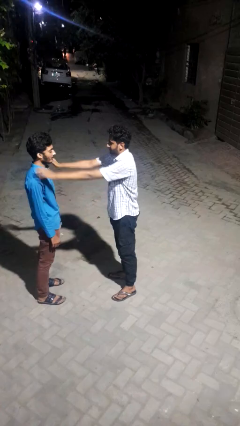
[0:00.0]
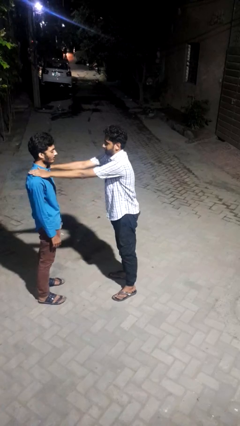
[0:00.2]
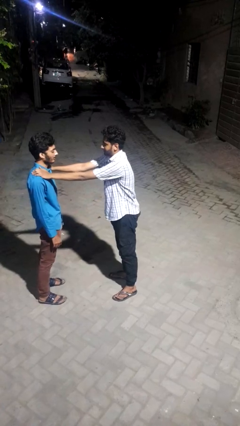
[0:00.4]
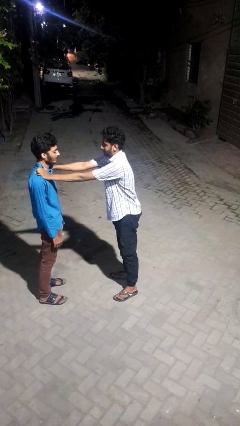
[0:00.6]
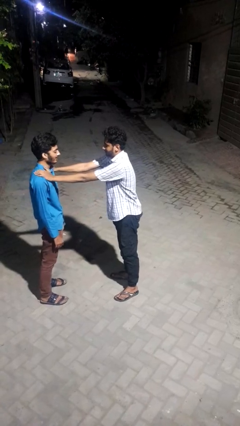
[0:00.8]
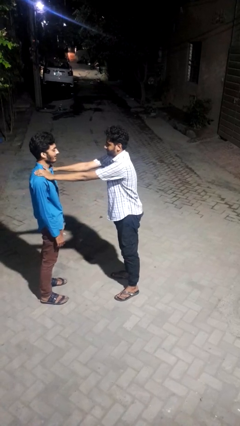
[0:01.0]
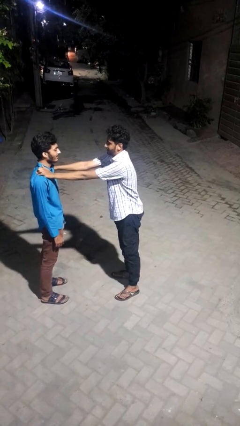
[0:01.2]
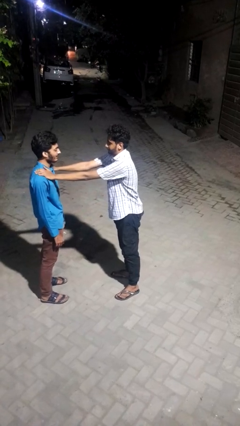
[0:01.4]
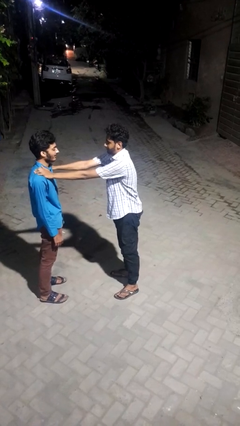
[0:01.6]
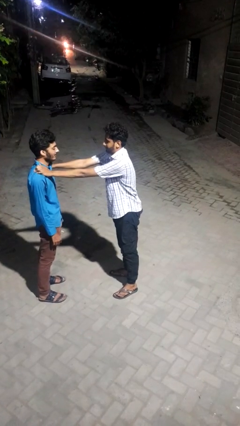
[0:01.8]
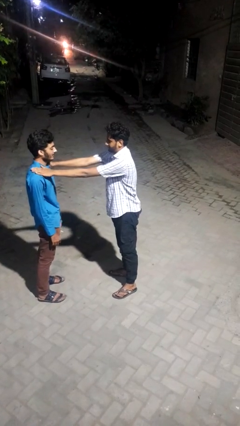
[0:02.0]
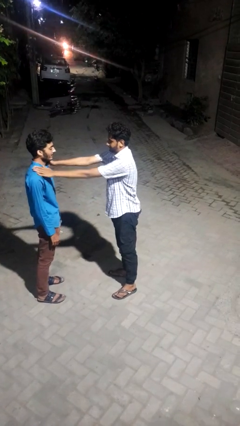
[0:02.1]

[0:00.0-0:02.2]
person pounds shoulders of person

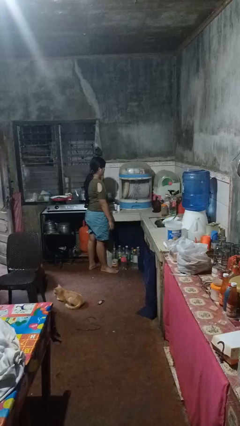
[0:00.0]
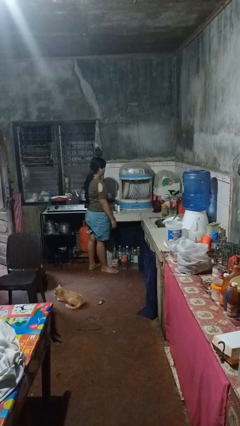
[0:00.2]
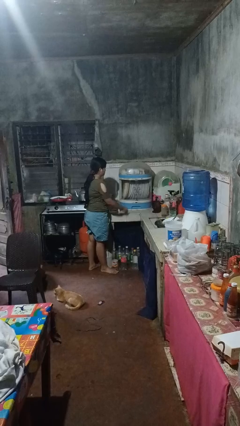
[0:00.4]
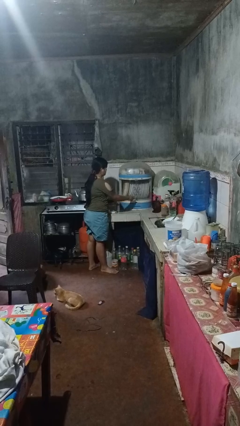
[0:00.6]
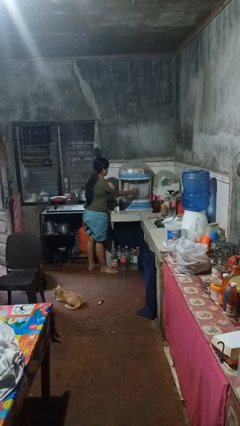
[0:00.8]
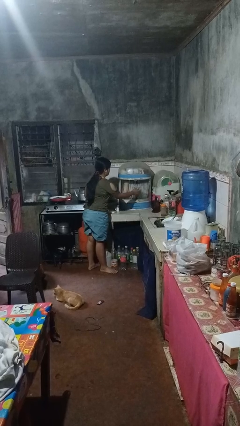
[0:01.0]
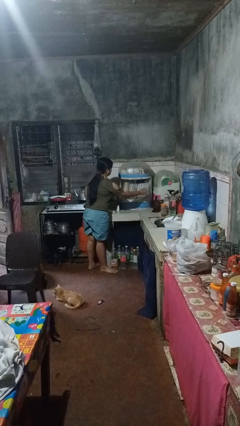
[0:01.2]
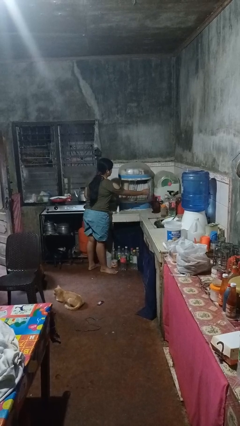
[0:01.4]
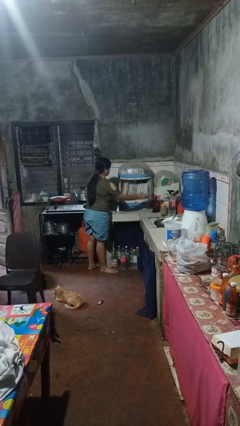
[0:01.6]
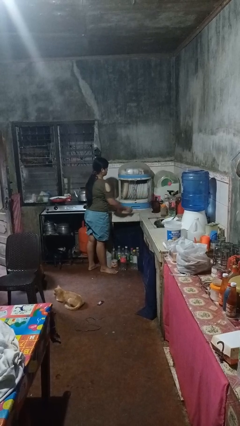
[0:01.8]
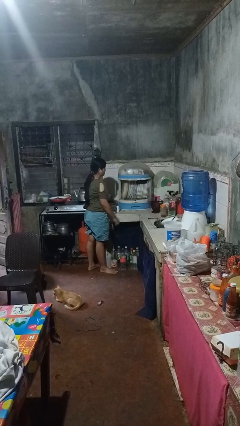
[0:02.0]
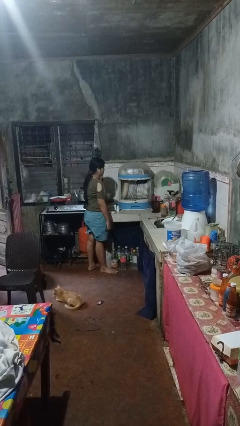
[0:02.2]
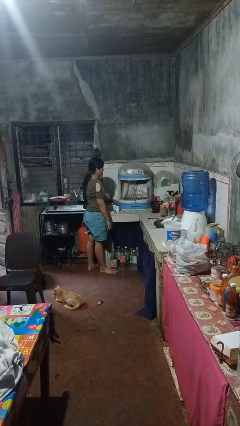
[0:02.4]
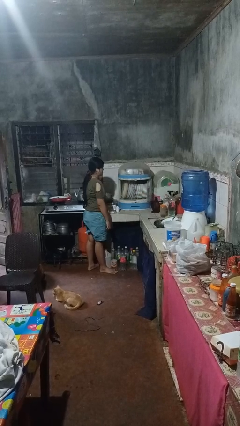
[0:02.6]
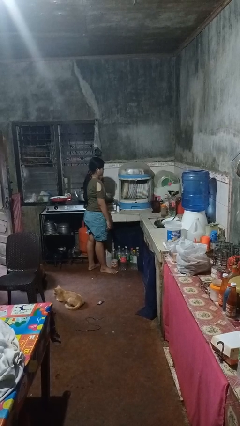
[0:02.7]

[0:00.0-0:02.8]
person opens kitchen drawer

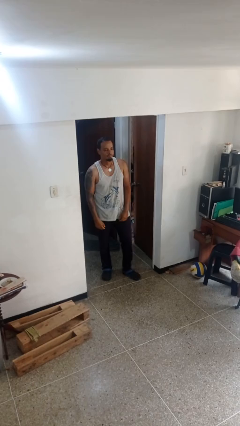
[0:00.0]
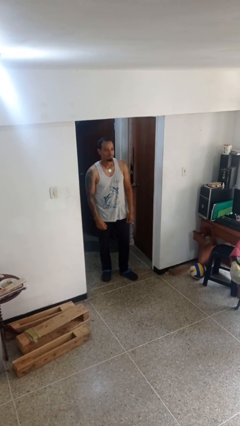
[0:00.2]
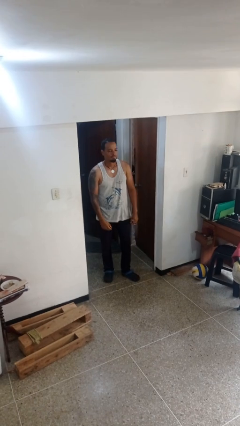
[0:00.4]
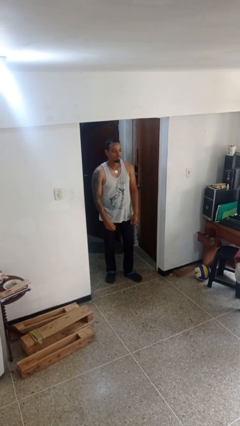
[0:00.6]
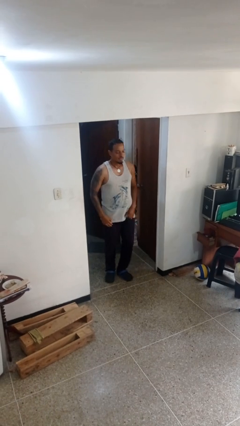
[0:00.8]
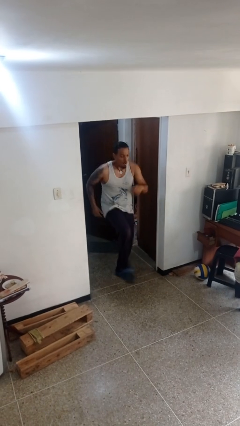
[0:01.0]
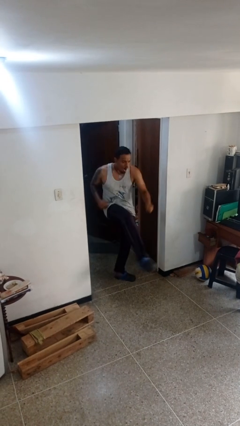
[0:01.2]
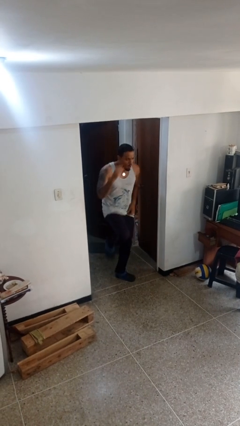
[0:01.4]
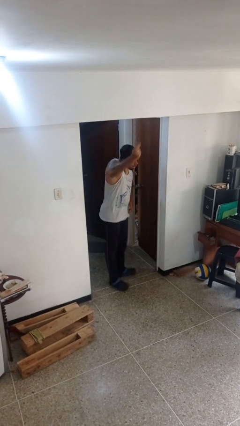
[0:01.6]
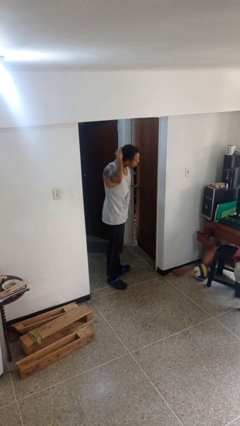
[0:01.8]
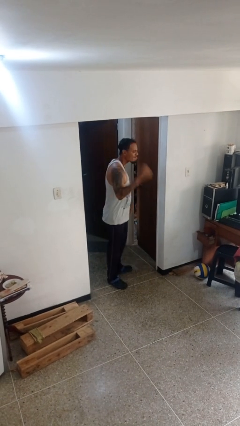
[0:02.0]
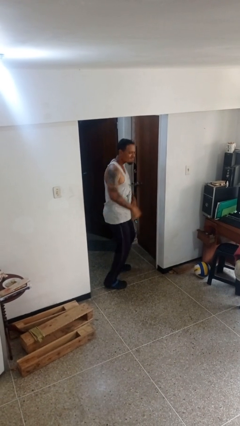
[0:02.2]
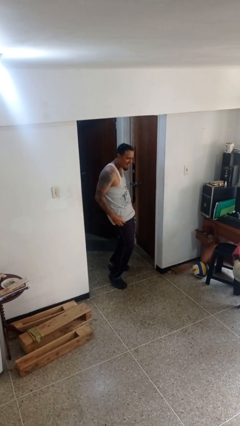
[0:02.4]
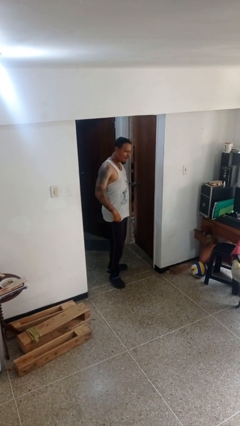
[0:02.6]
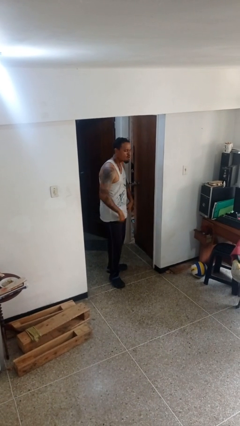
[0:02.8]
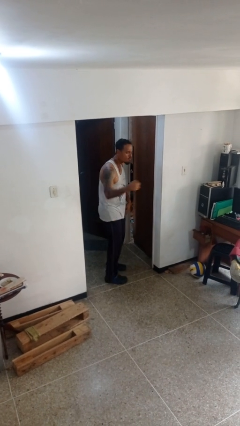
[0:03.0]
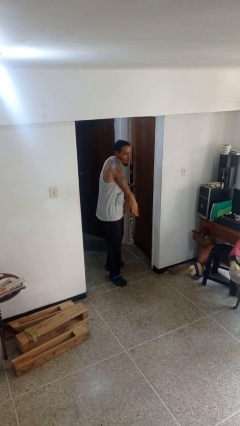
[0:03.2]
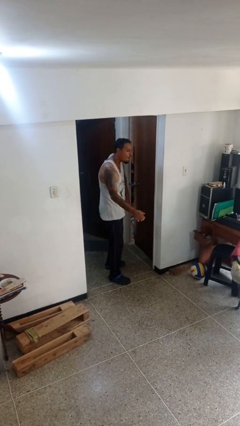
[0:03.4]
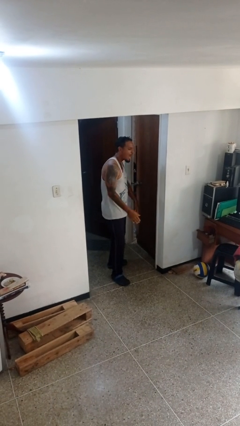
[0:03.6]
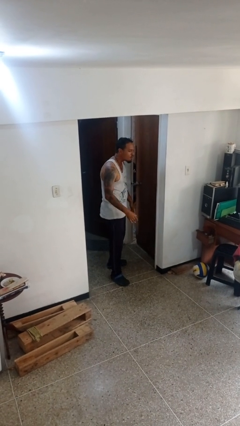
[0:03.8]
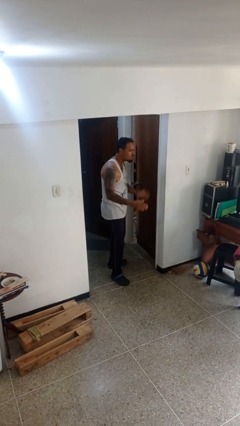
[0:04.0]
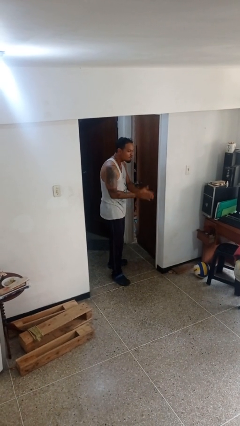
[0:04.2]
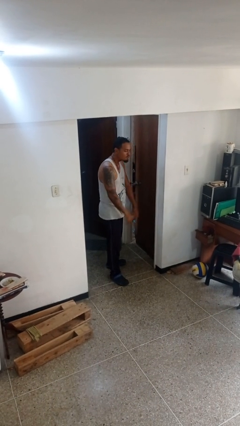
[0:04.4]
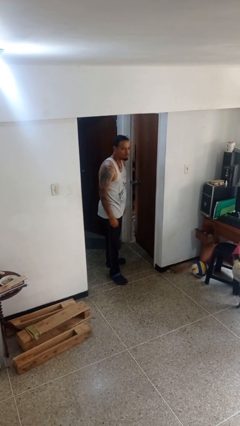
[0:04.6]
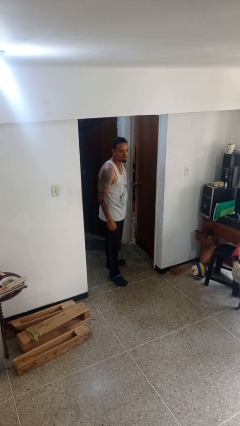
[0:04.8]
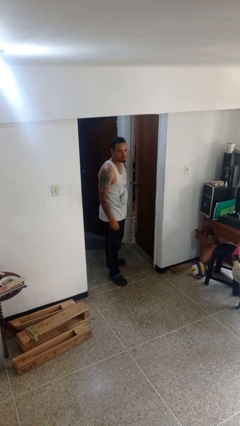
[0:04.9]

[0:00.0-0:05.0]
person dances in place

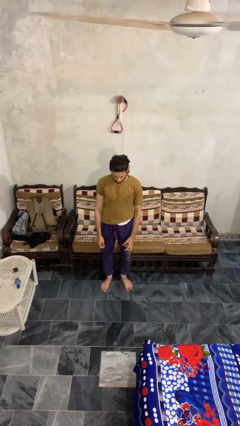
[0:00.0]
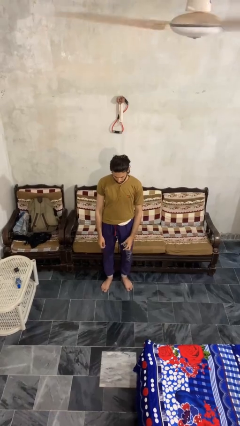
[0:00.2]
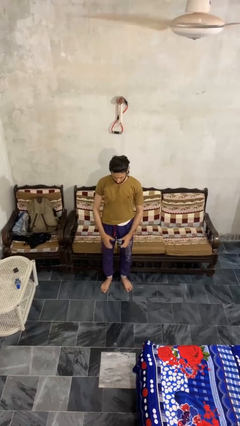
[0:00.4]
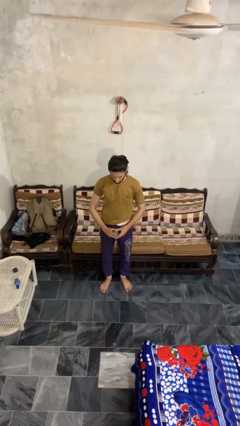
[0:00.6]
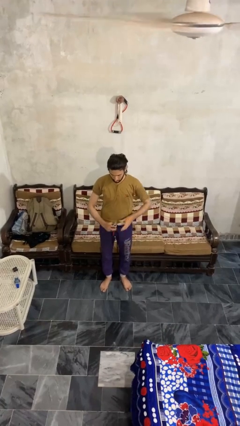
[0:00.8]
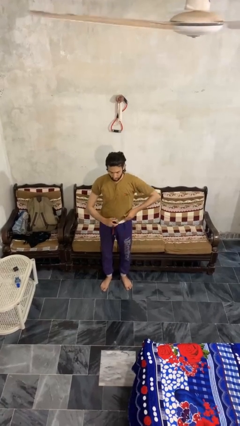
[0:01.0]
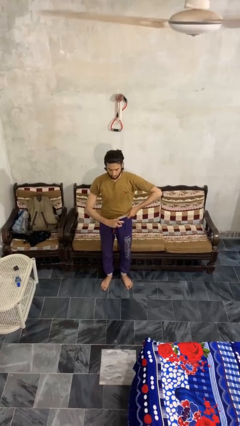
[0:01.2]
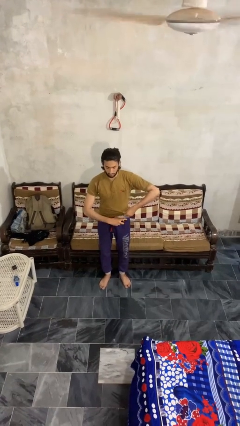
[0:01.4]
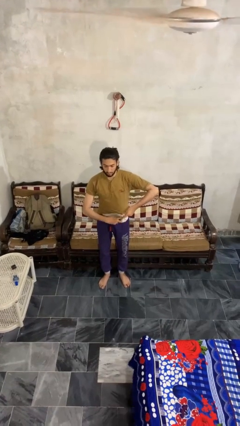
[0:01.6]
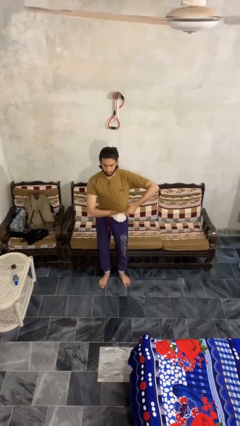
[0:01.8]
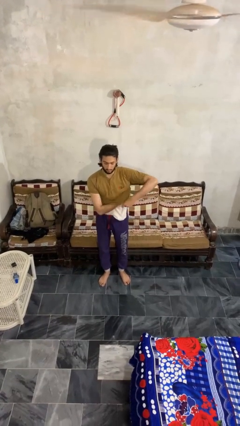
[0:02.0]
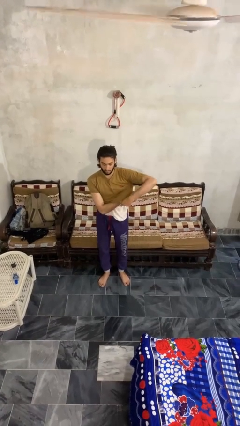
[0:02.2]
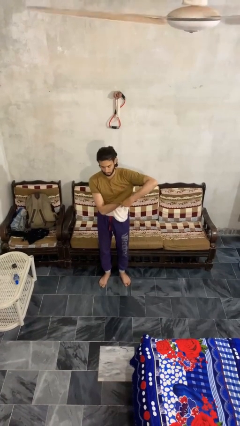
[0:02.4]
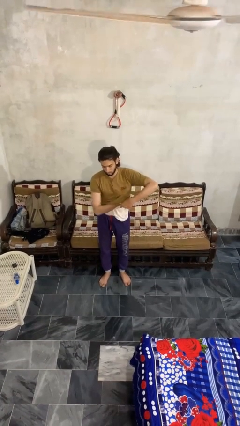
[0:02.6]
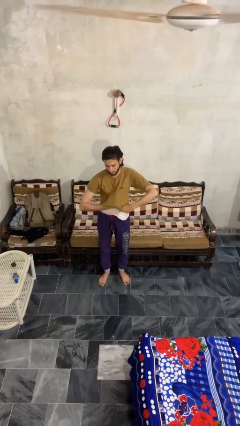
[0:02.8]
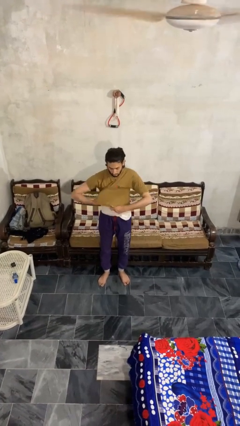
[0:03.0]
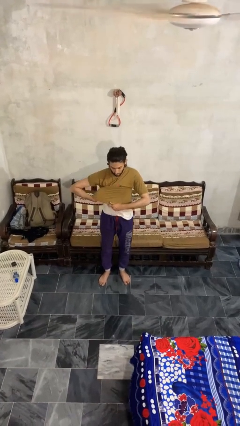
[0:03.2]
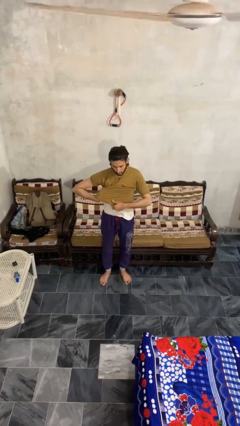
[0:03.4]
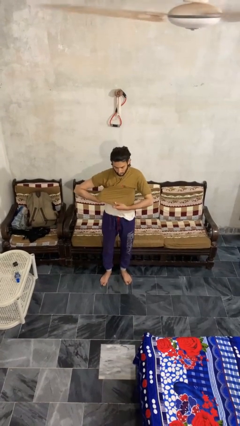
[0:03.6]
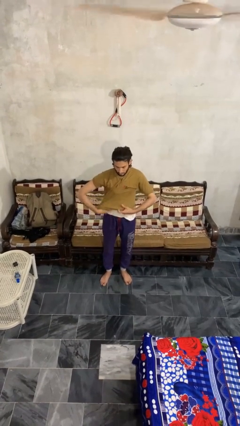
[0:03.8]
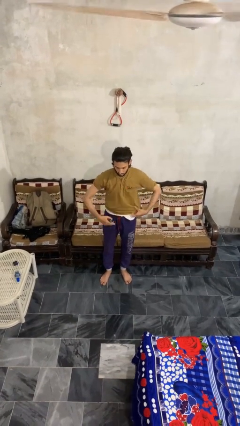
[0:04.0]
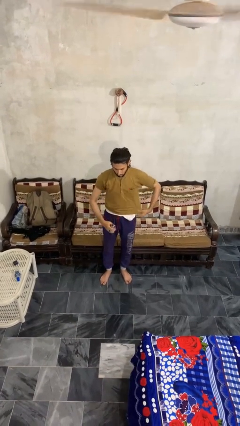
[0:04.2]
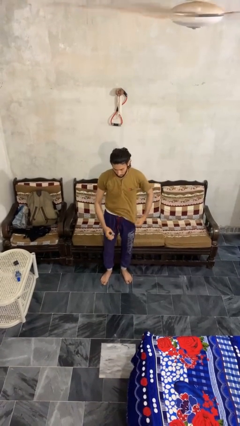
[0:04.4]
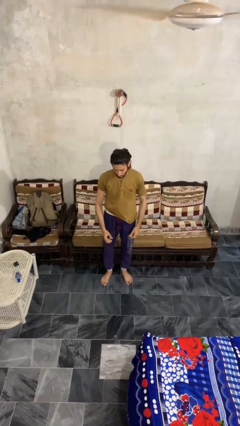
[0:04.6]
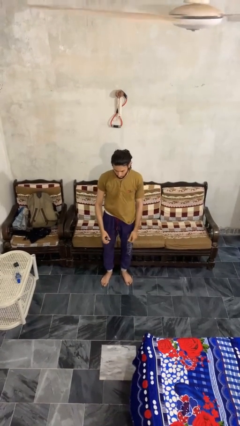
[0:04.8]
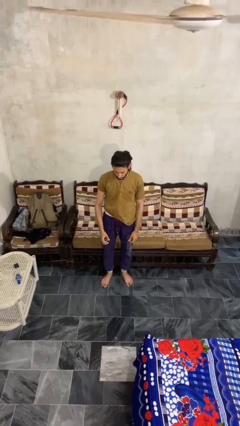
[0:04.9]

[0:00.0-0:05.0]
person applies deodorant

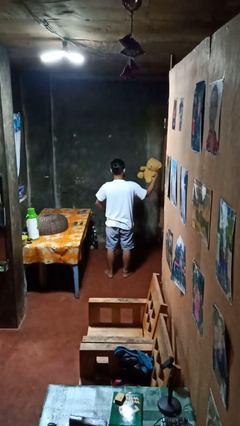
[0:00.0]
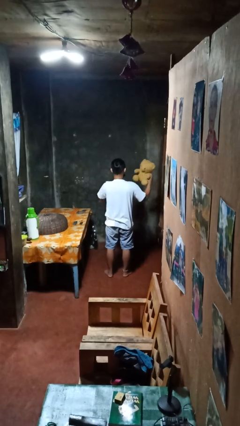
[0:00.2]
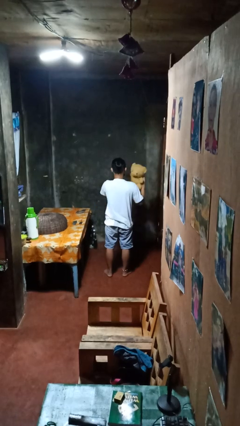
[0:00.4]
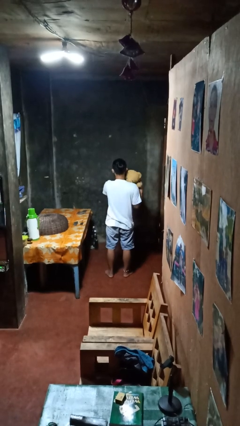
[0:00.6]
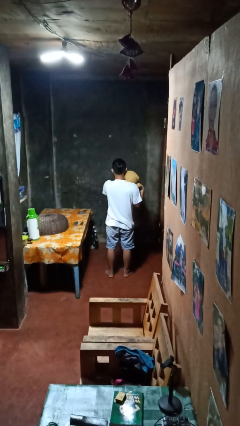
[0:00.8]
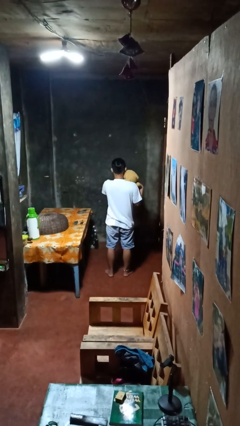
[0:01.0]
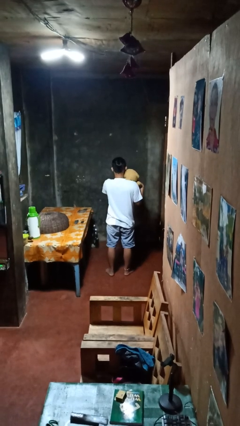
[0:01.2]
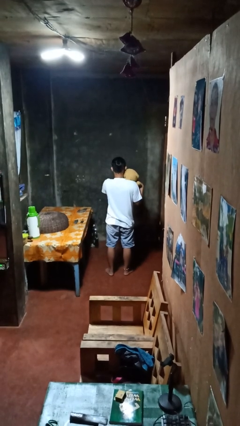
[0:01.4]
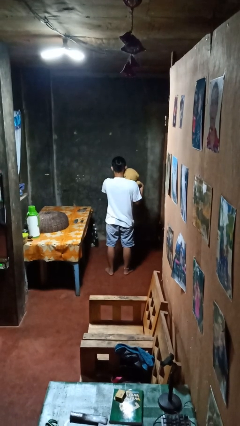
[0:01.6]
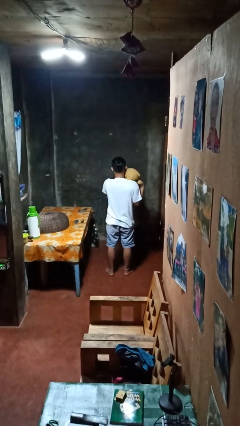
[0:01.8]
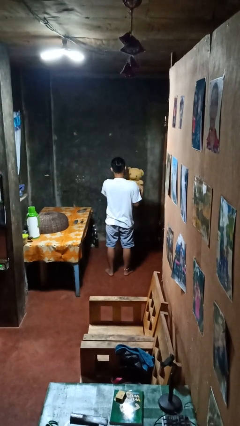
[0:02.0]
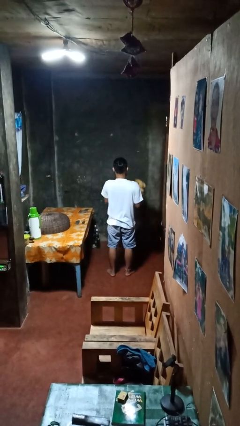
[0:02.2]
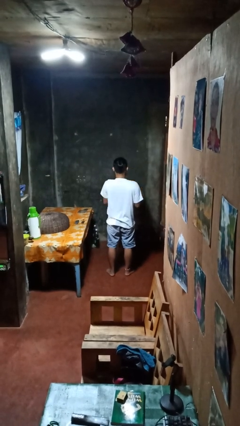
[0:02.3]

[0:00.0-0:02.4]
person hugs stuffed animal
